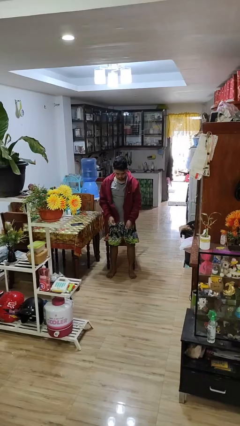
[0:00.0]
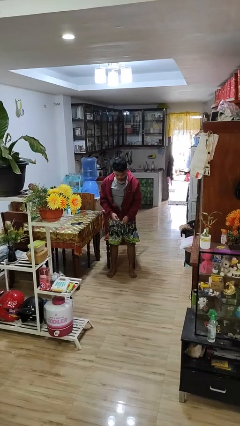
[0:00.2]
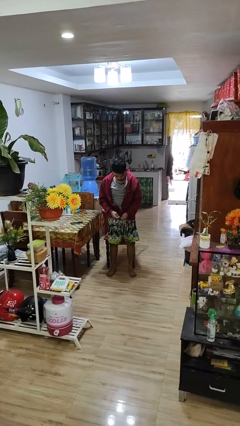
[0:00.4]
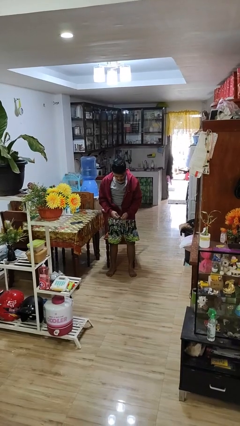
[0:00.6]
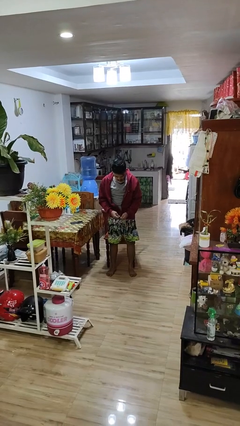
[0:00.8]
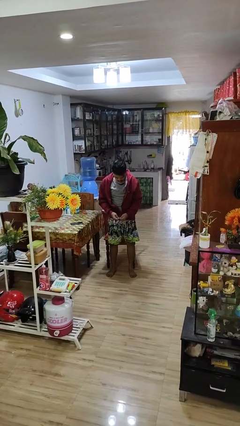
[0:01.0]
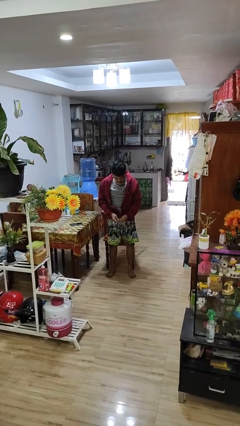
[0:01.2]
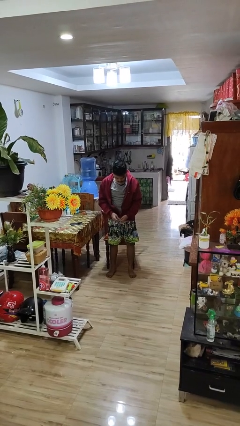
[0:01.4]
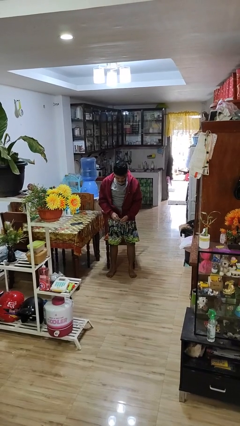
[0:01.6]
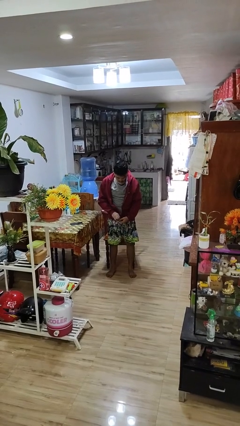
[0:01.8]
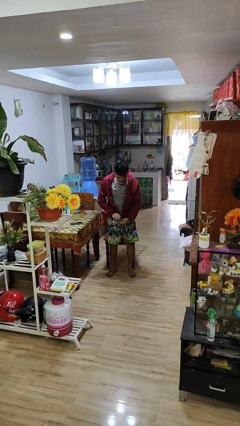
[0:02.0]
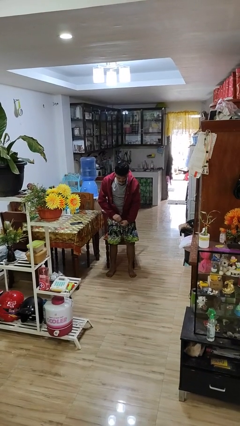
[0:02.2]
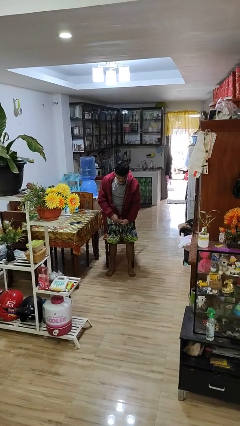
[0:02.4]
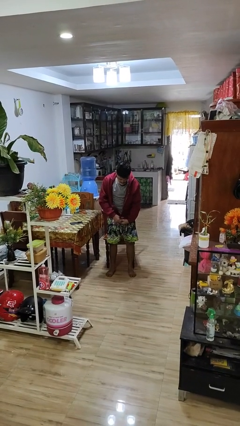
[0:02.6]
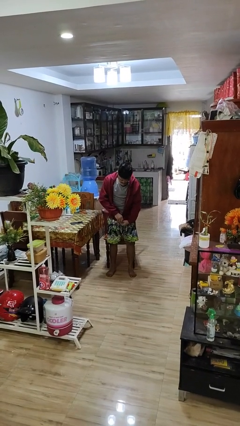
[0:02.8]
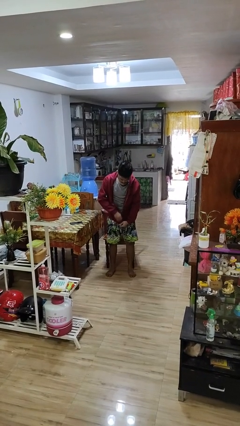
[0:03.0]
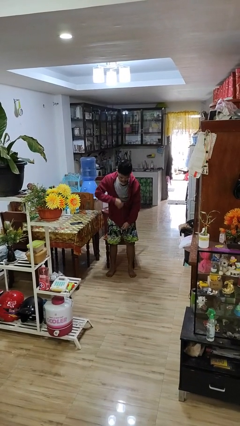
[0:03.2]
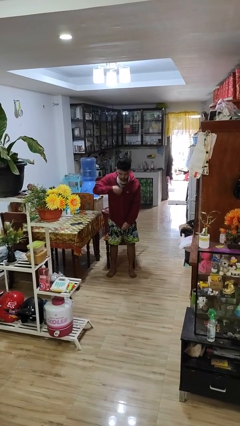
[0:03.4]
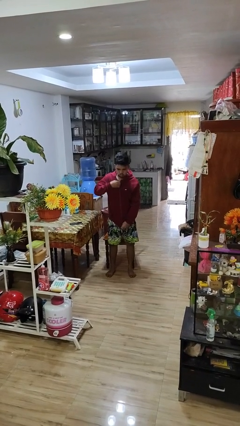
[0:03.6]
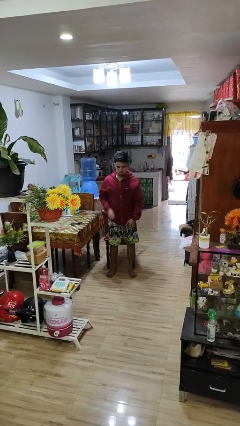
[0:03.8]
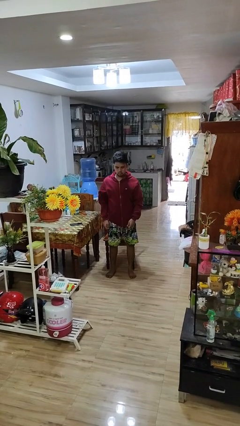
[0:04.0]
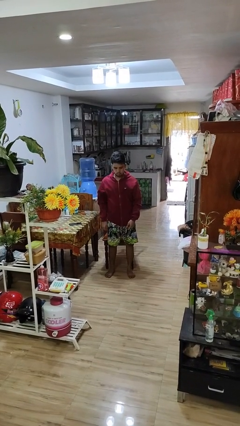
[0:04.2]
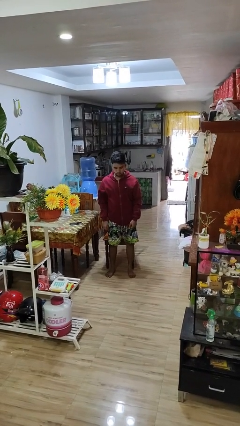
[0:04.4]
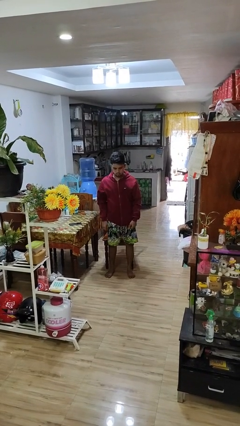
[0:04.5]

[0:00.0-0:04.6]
person zips up jacket

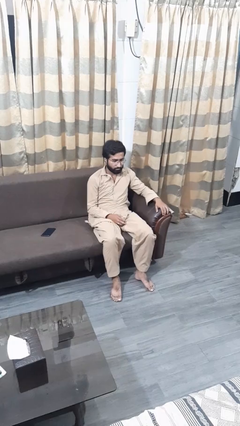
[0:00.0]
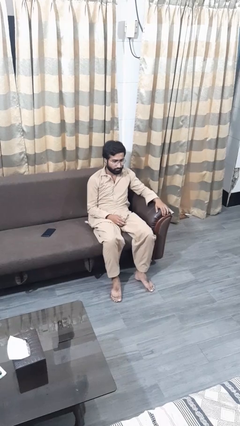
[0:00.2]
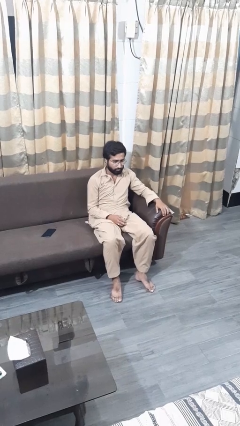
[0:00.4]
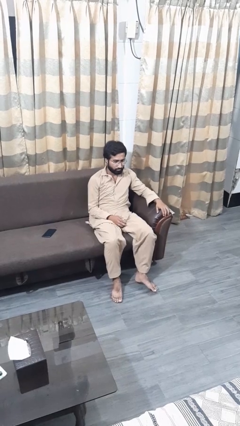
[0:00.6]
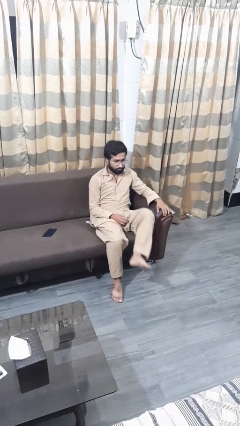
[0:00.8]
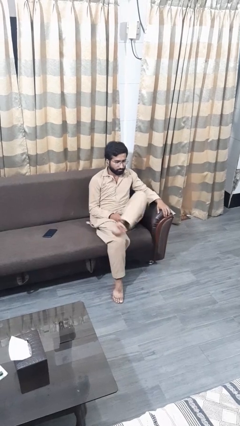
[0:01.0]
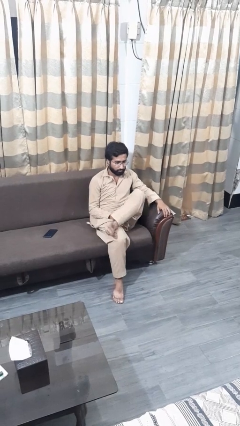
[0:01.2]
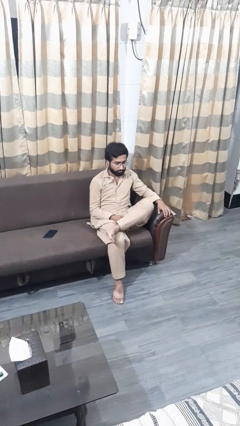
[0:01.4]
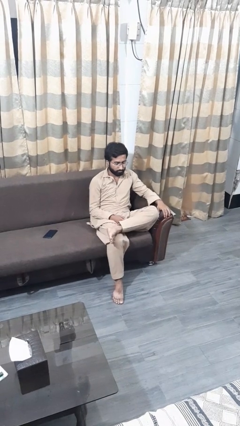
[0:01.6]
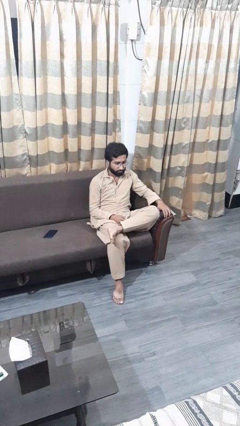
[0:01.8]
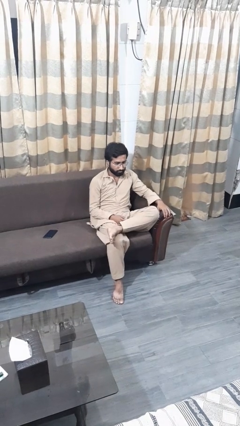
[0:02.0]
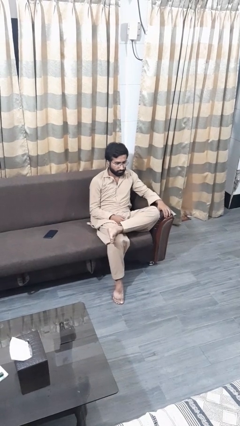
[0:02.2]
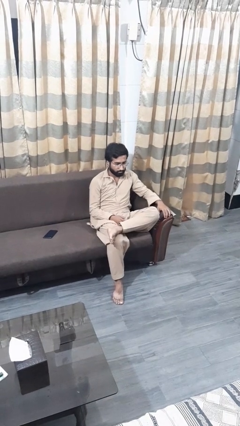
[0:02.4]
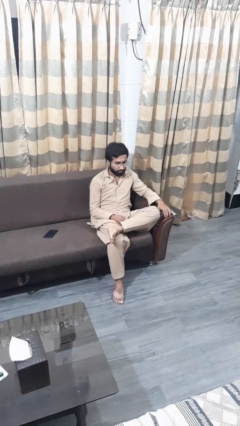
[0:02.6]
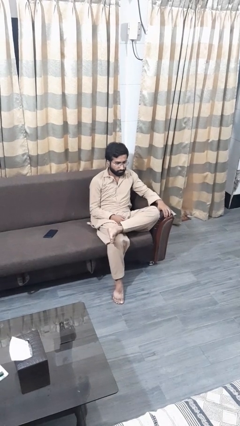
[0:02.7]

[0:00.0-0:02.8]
person crosses legs

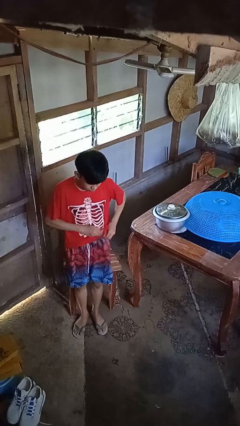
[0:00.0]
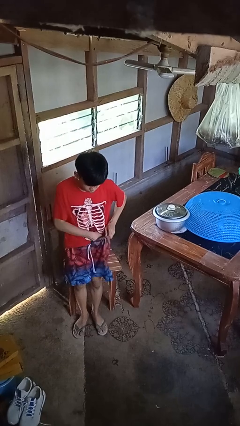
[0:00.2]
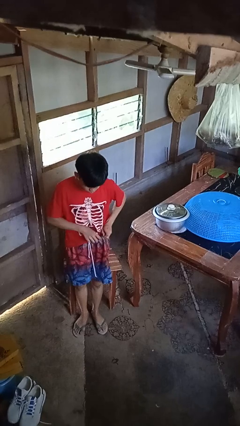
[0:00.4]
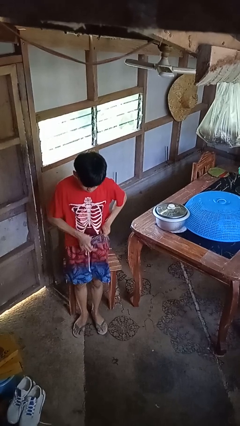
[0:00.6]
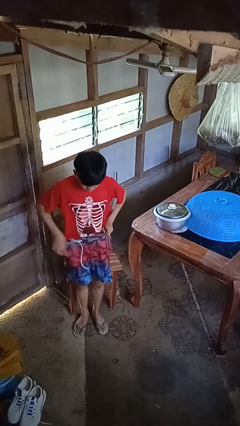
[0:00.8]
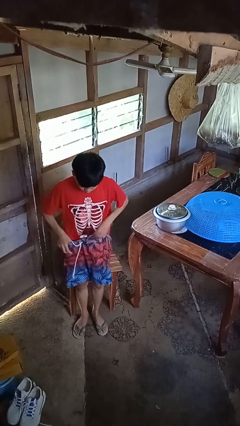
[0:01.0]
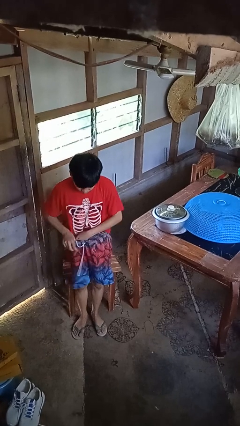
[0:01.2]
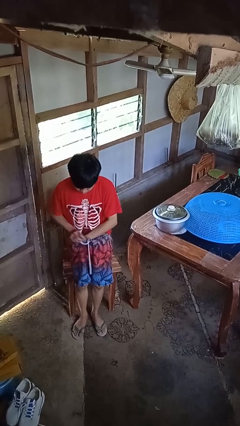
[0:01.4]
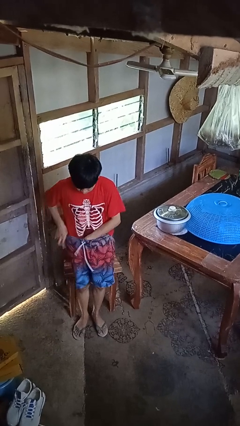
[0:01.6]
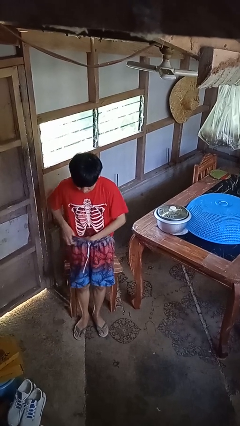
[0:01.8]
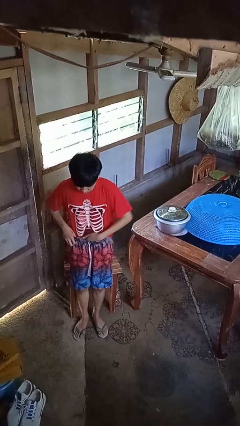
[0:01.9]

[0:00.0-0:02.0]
person tucks in shirt

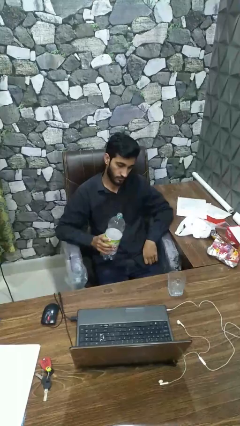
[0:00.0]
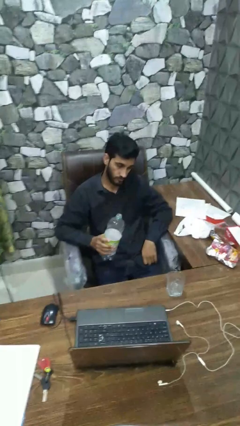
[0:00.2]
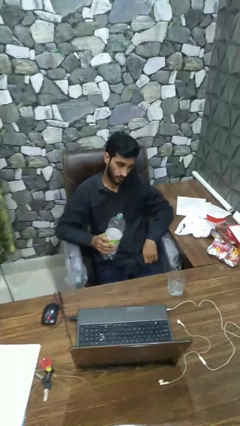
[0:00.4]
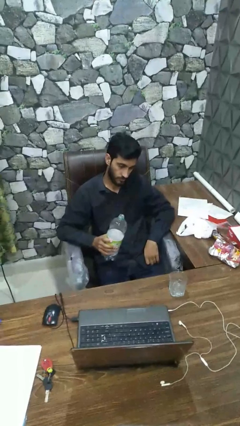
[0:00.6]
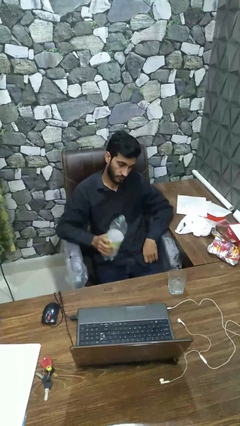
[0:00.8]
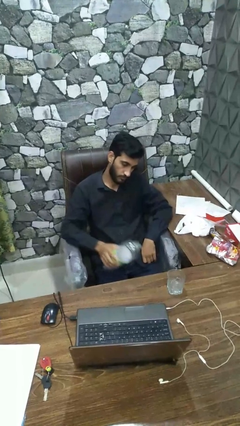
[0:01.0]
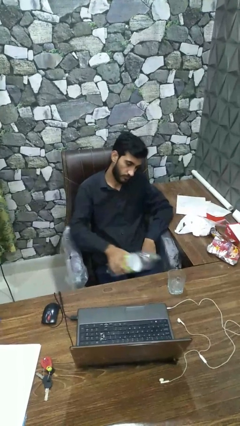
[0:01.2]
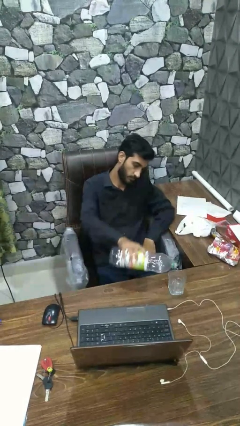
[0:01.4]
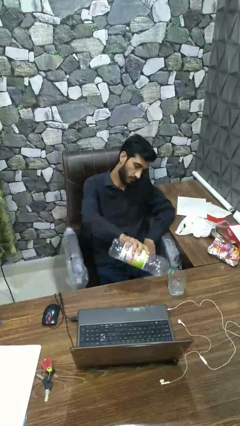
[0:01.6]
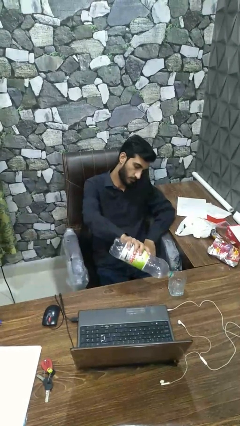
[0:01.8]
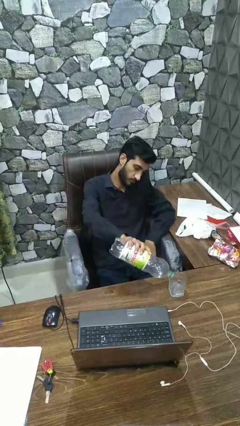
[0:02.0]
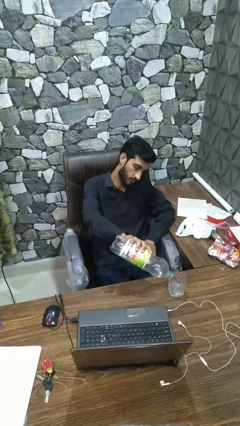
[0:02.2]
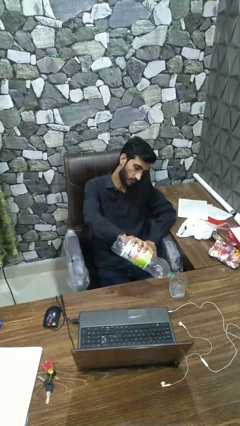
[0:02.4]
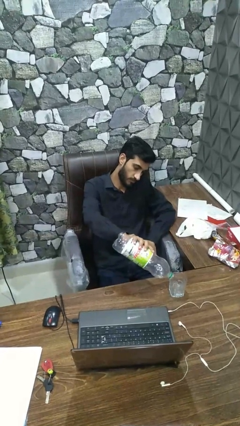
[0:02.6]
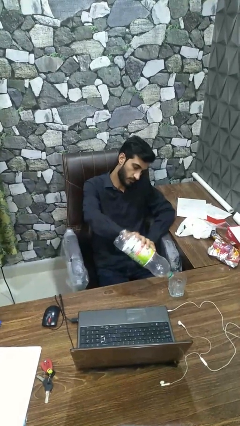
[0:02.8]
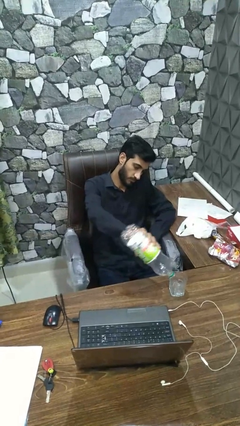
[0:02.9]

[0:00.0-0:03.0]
person pours liquid into cup

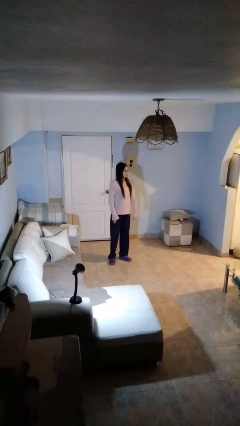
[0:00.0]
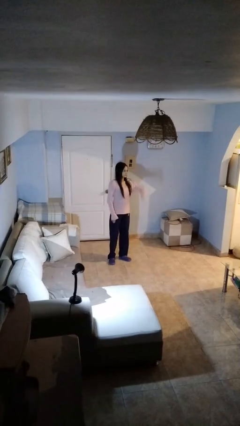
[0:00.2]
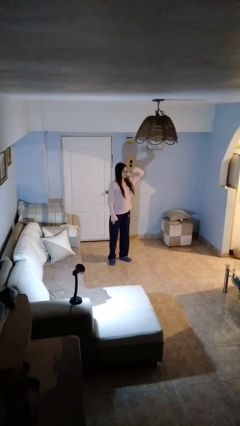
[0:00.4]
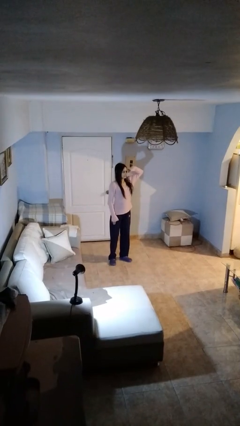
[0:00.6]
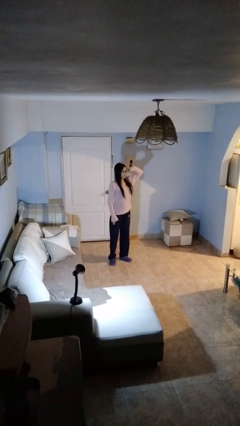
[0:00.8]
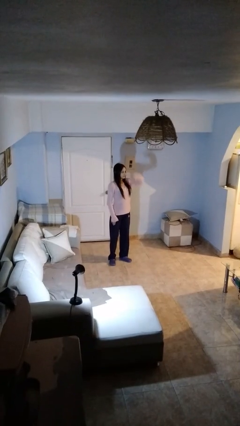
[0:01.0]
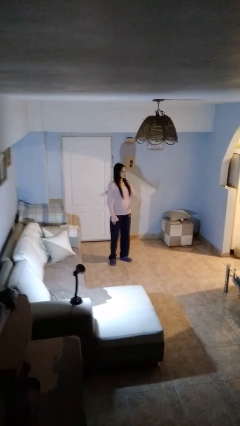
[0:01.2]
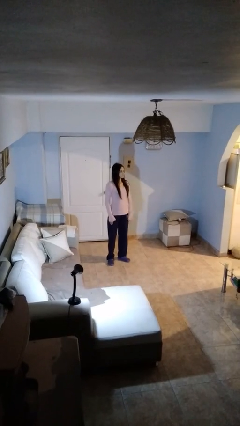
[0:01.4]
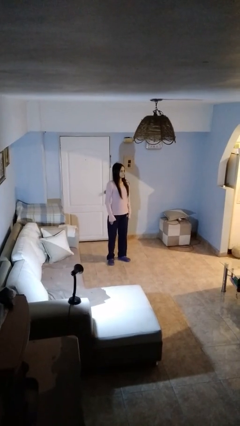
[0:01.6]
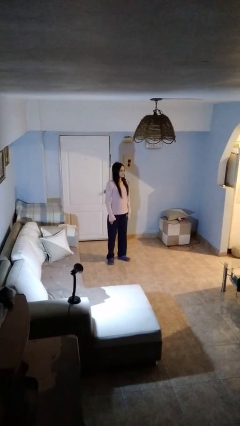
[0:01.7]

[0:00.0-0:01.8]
person salutes

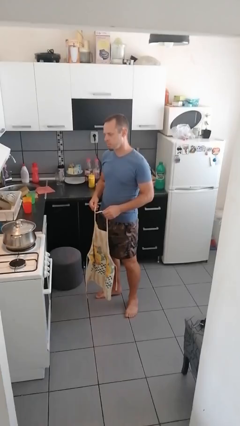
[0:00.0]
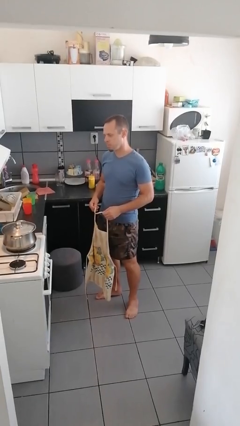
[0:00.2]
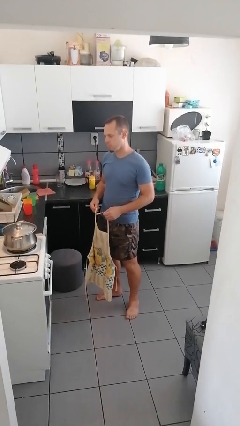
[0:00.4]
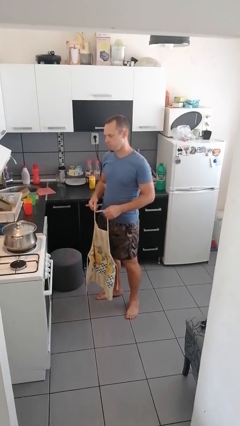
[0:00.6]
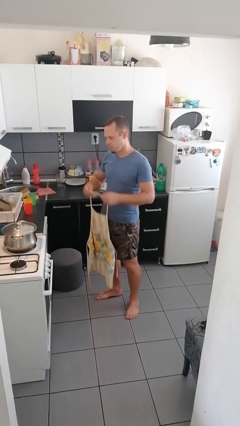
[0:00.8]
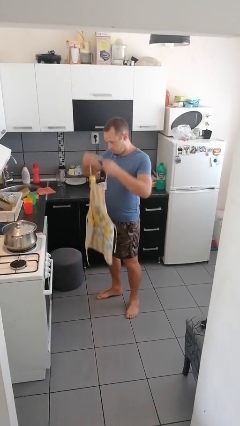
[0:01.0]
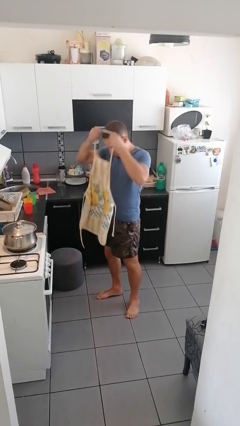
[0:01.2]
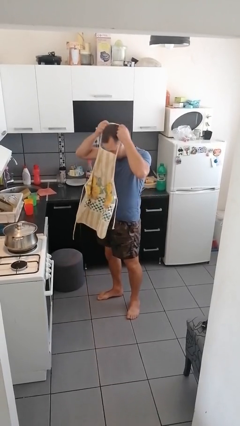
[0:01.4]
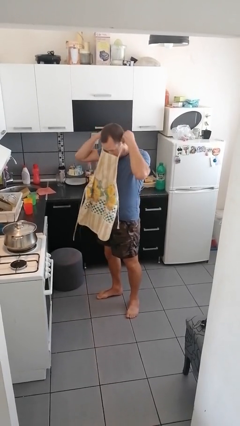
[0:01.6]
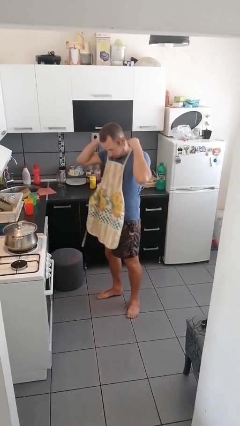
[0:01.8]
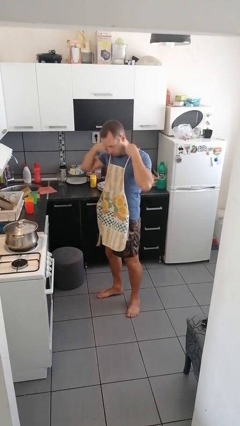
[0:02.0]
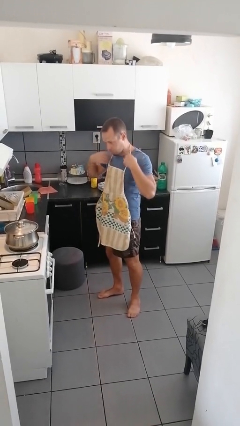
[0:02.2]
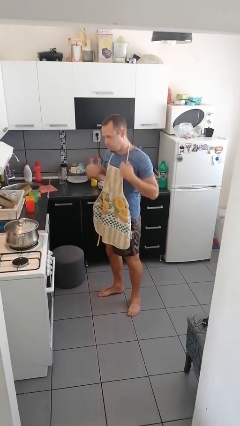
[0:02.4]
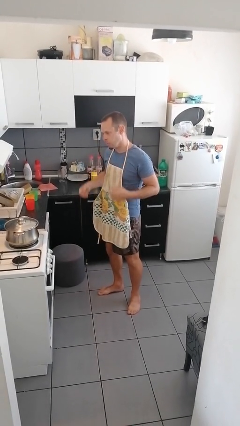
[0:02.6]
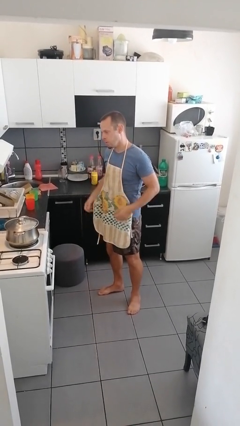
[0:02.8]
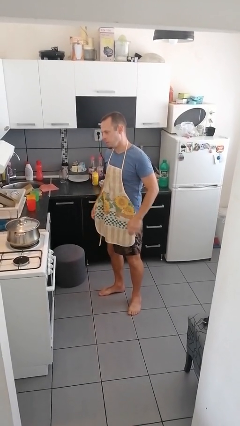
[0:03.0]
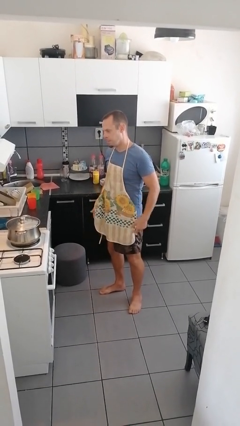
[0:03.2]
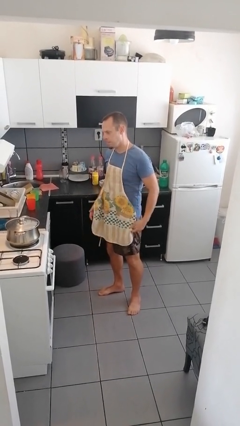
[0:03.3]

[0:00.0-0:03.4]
person puts on apron
